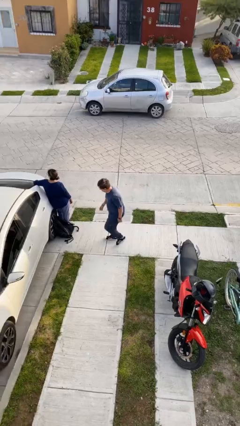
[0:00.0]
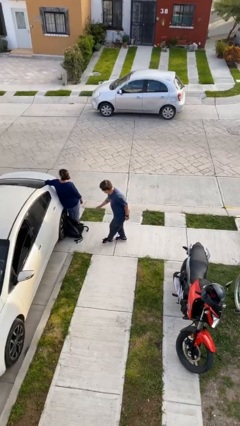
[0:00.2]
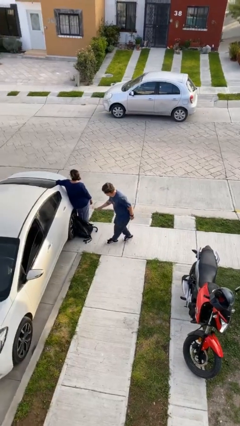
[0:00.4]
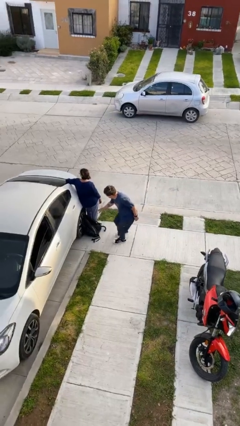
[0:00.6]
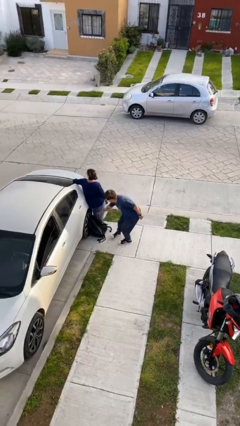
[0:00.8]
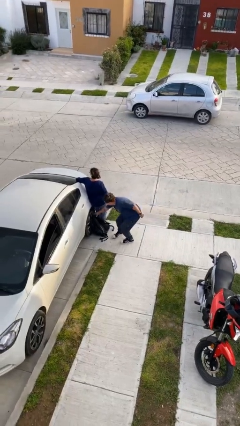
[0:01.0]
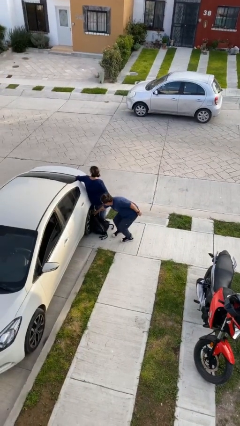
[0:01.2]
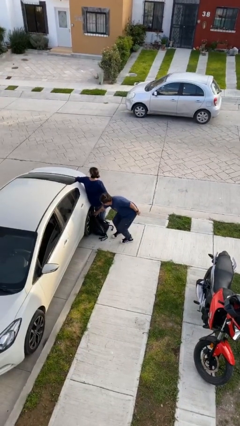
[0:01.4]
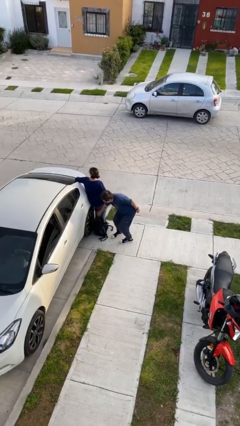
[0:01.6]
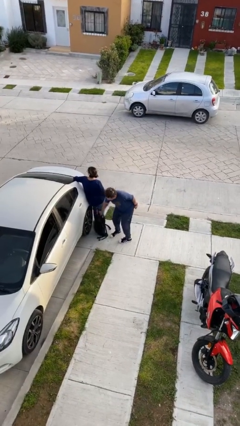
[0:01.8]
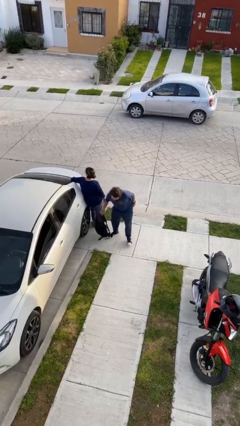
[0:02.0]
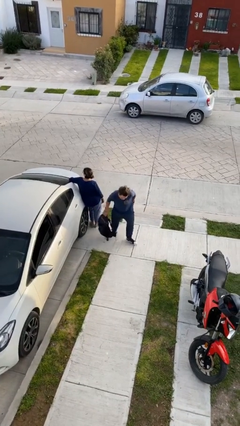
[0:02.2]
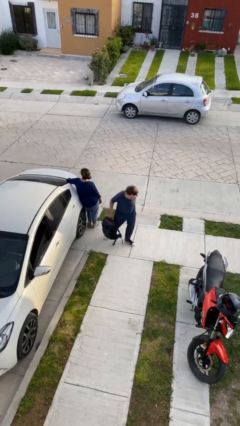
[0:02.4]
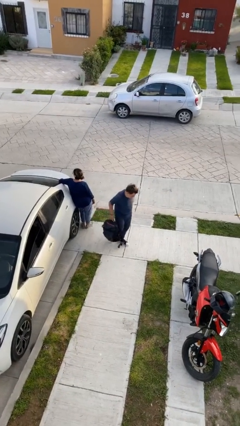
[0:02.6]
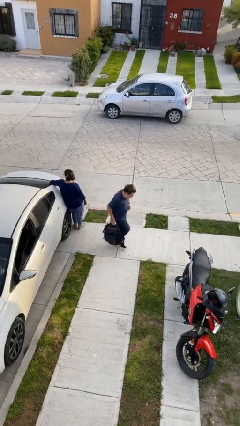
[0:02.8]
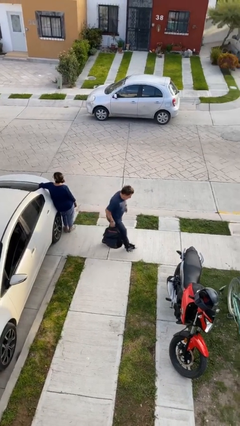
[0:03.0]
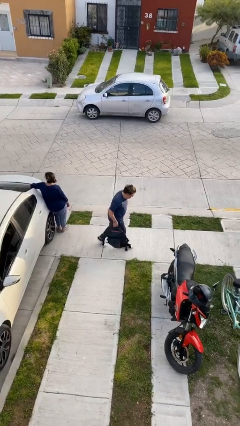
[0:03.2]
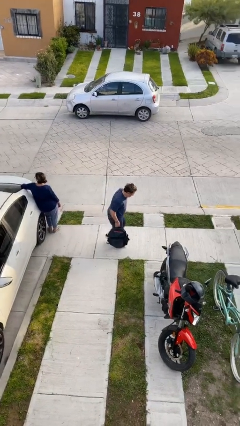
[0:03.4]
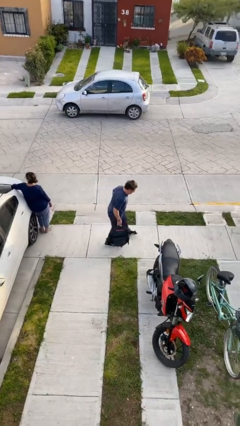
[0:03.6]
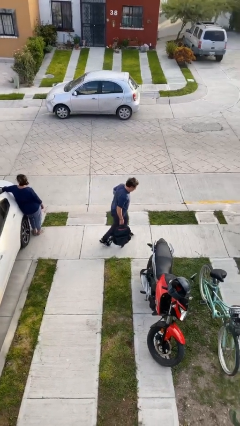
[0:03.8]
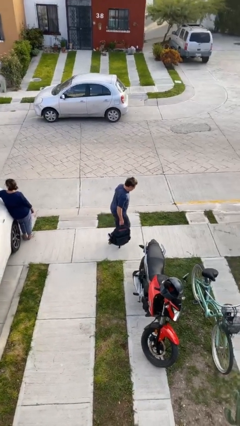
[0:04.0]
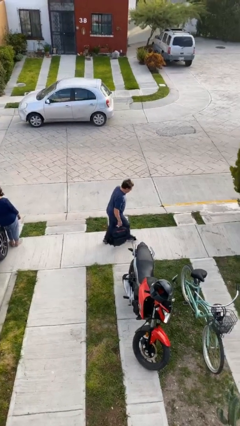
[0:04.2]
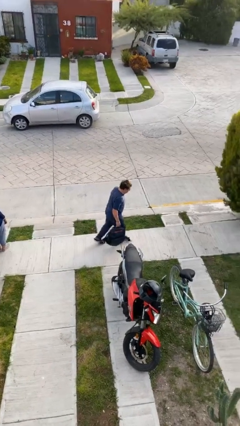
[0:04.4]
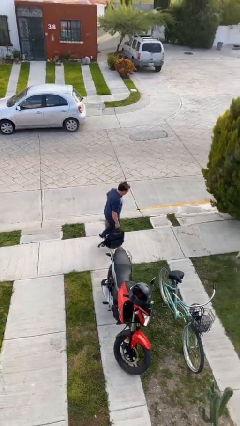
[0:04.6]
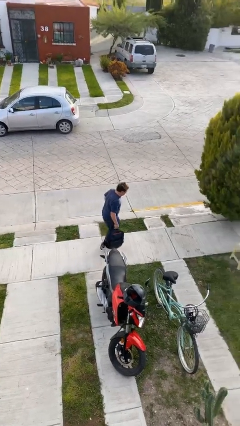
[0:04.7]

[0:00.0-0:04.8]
person steals object from person

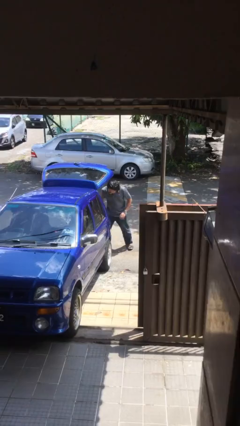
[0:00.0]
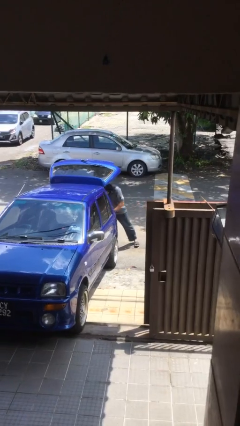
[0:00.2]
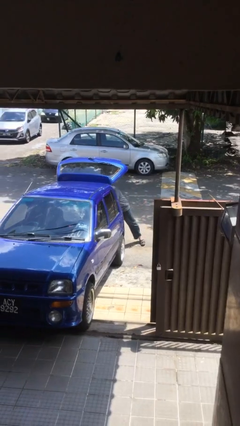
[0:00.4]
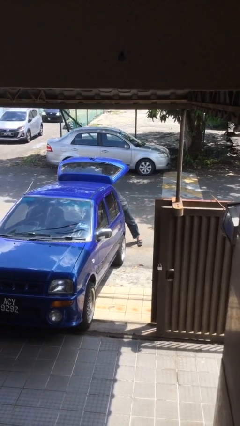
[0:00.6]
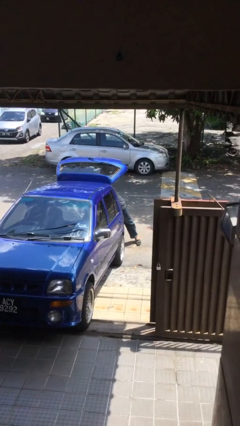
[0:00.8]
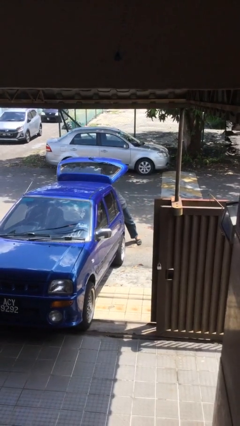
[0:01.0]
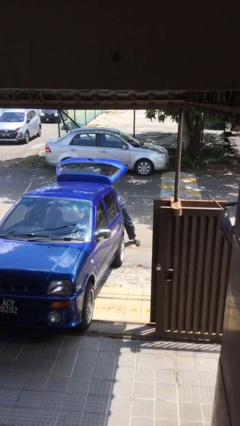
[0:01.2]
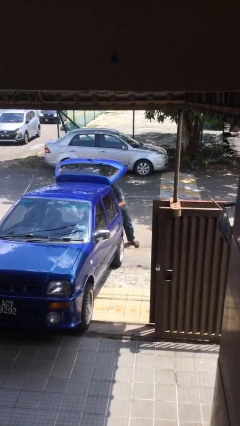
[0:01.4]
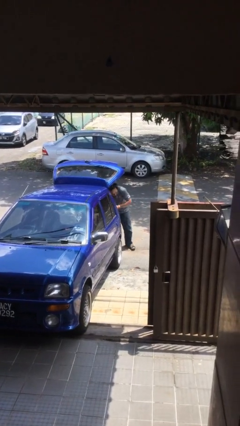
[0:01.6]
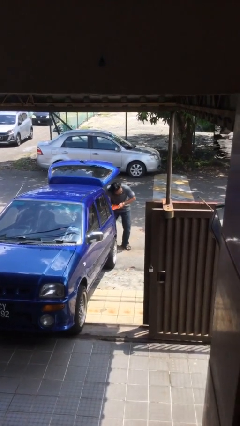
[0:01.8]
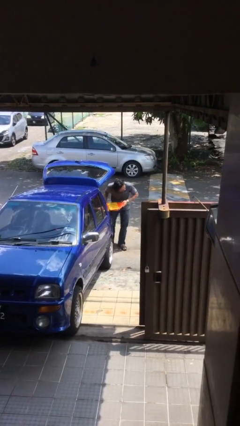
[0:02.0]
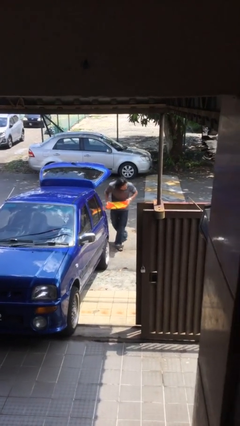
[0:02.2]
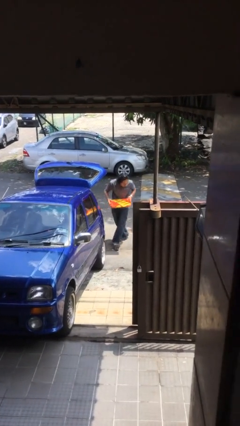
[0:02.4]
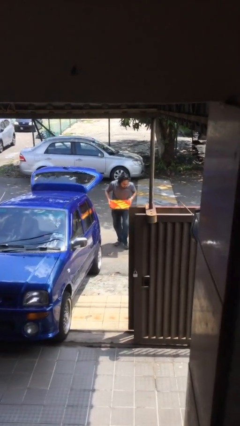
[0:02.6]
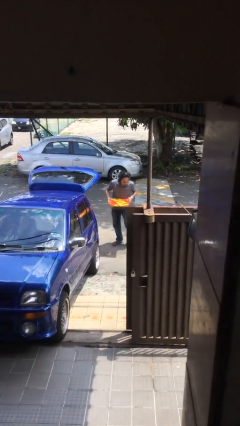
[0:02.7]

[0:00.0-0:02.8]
person unloads car

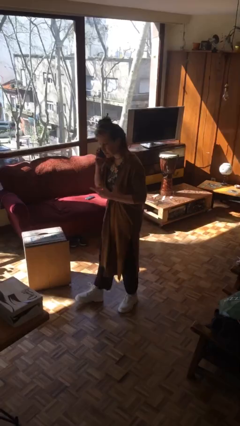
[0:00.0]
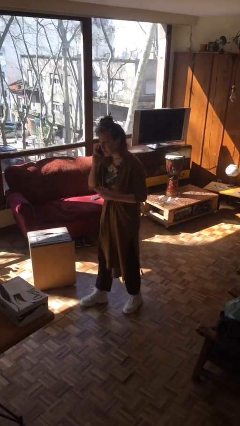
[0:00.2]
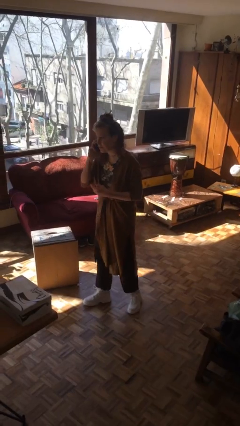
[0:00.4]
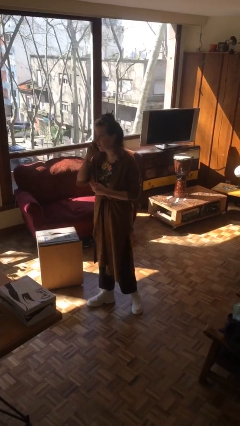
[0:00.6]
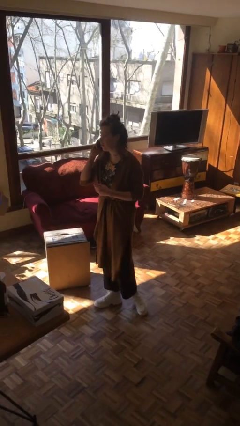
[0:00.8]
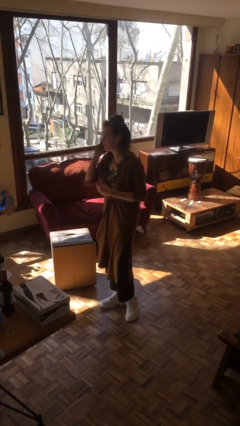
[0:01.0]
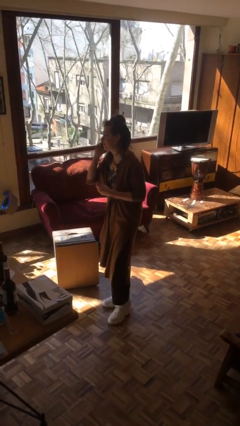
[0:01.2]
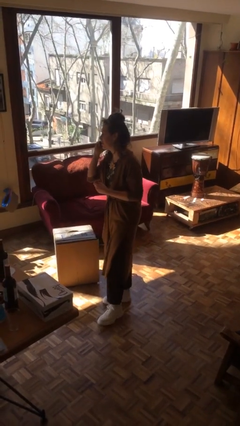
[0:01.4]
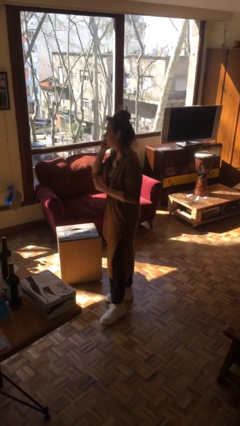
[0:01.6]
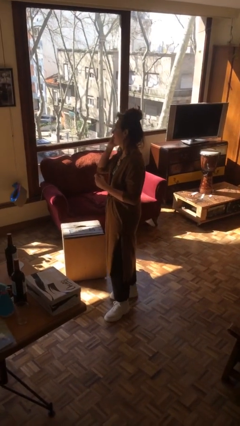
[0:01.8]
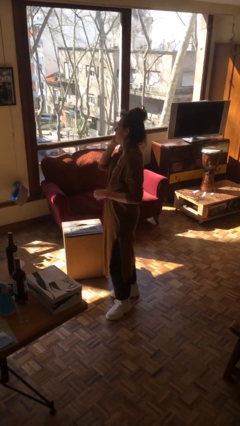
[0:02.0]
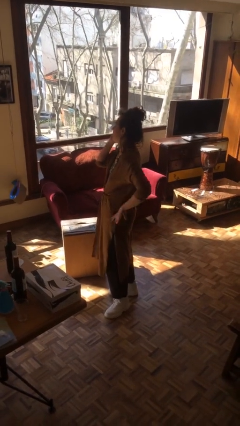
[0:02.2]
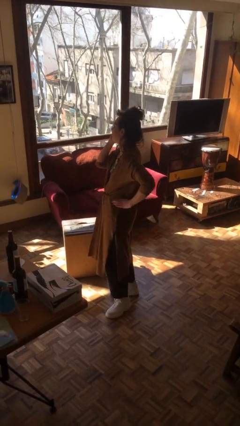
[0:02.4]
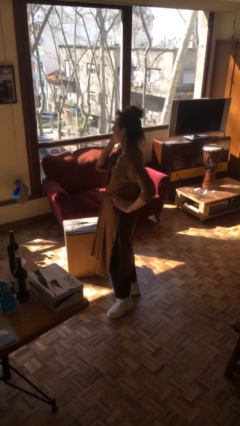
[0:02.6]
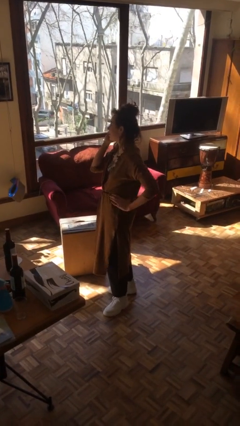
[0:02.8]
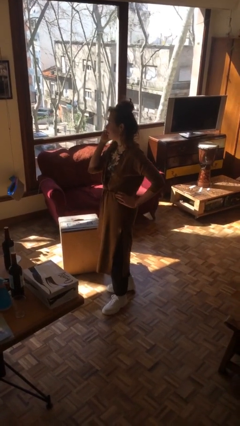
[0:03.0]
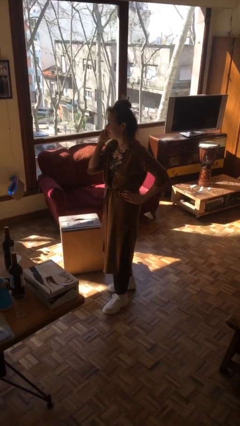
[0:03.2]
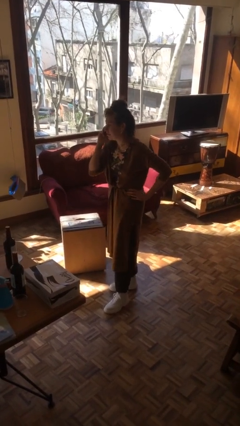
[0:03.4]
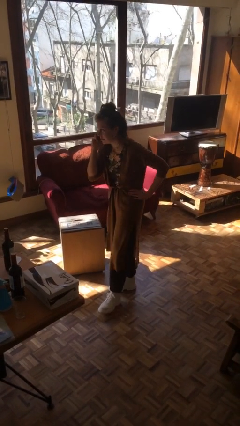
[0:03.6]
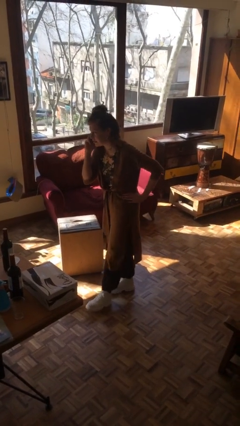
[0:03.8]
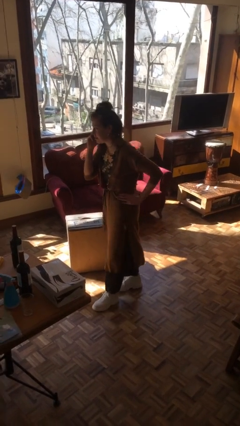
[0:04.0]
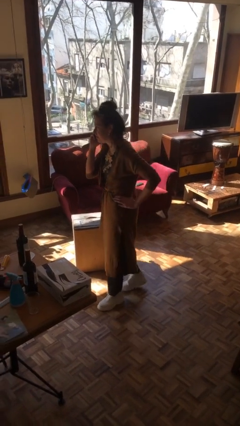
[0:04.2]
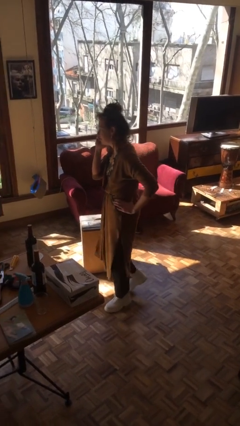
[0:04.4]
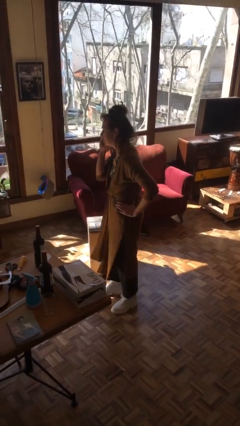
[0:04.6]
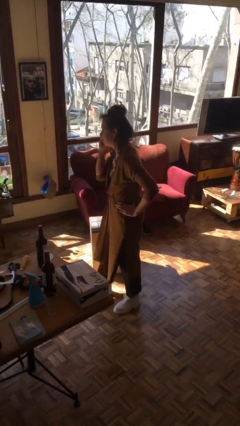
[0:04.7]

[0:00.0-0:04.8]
person talks on phone

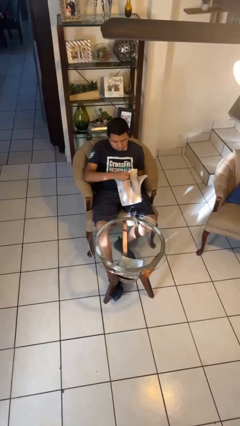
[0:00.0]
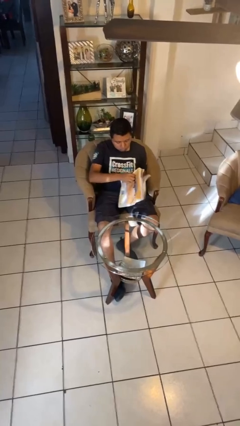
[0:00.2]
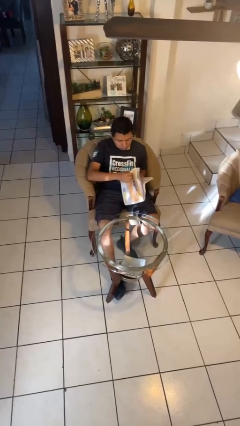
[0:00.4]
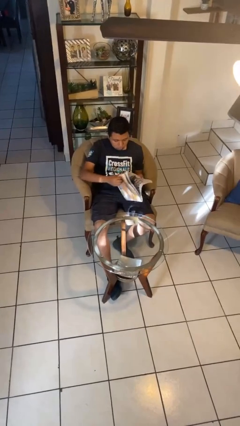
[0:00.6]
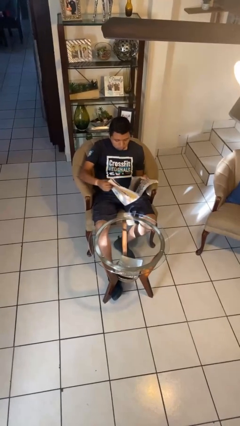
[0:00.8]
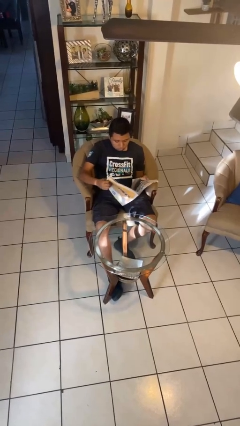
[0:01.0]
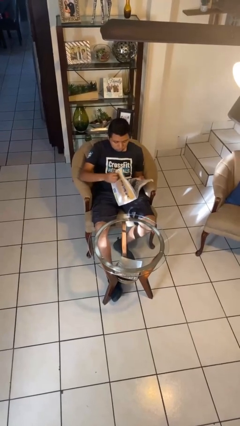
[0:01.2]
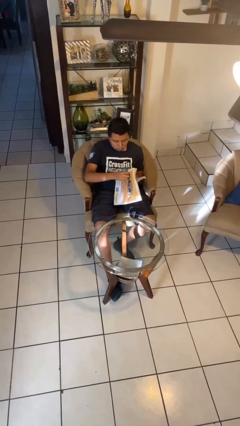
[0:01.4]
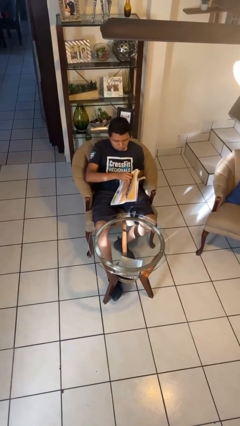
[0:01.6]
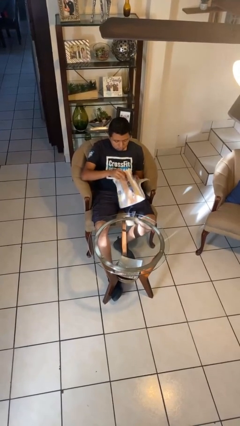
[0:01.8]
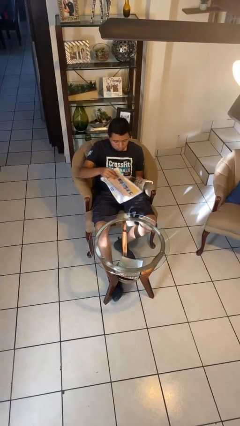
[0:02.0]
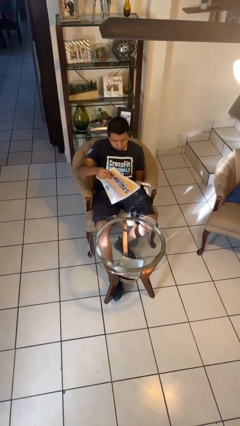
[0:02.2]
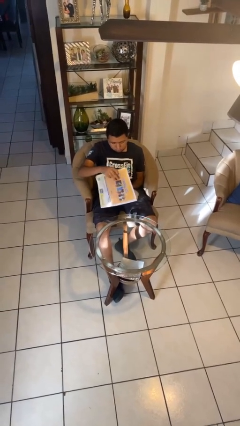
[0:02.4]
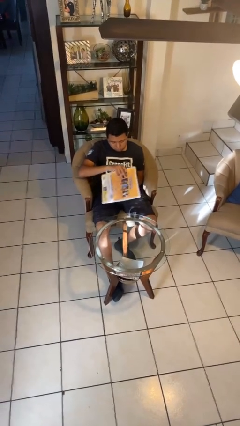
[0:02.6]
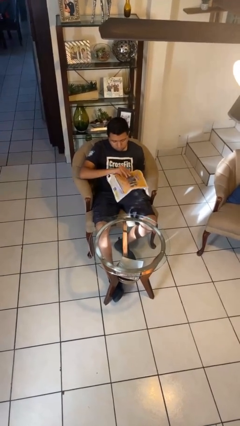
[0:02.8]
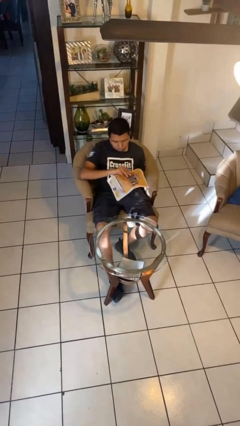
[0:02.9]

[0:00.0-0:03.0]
person reads newspaper

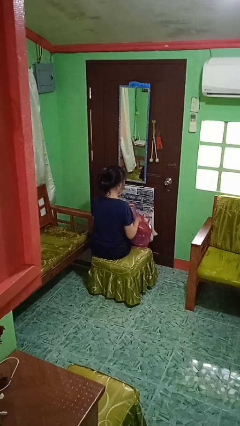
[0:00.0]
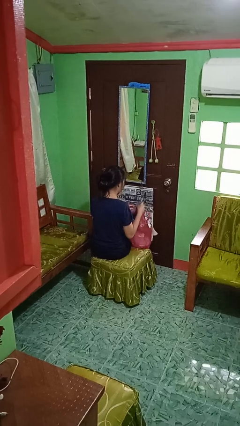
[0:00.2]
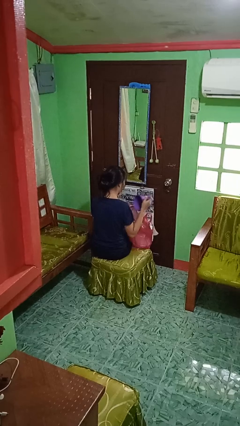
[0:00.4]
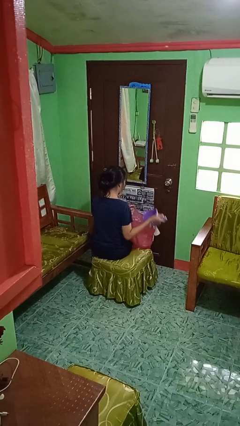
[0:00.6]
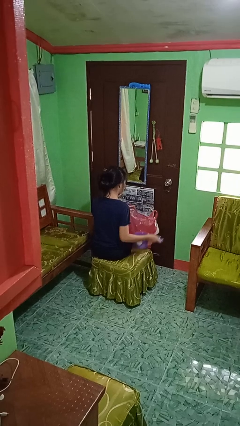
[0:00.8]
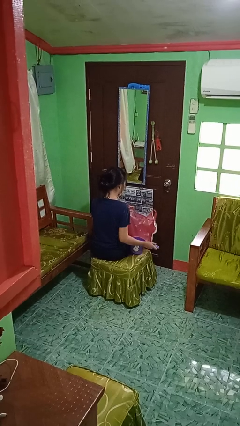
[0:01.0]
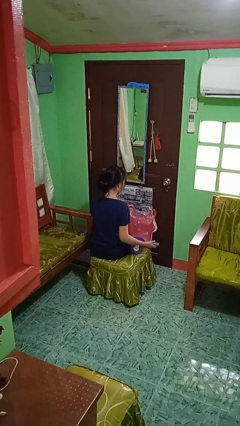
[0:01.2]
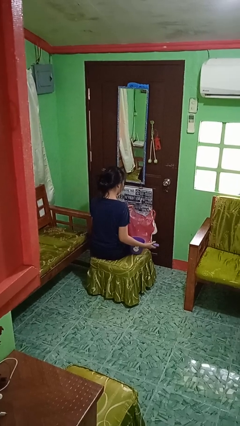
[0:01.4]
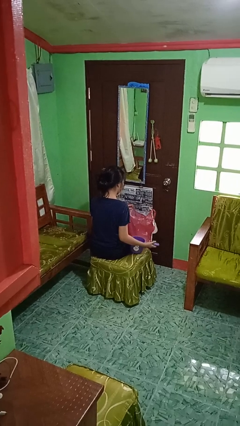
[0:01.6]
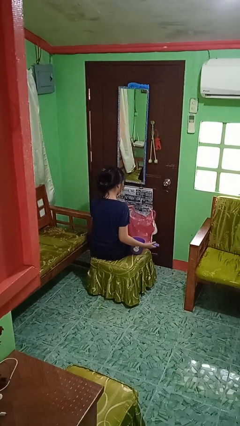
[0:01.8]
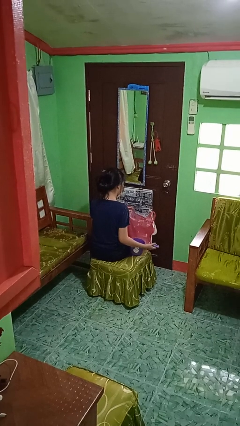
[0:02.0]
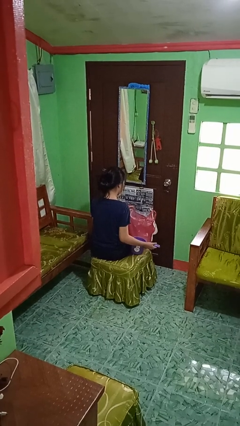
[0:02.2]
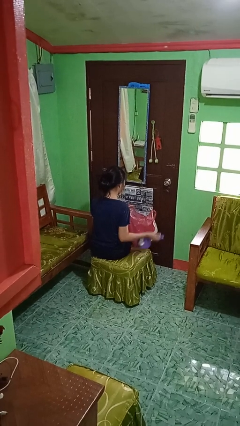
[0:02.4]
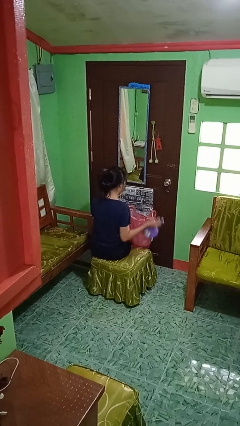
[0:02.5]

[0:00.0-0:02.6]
person takes object from bag
